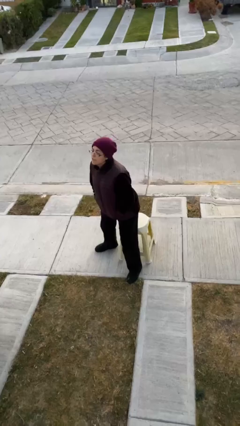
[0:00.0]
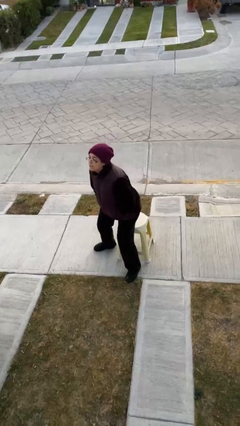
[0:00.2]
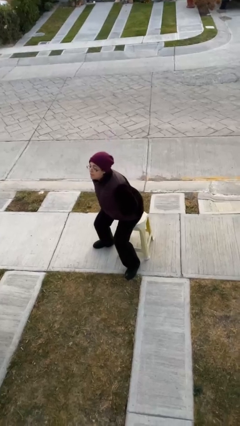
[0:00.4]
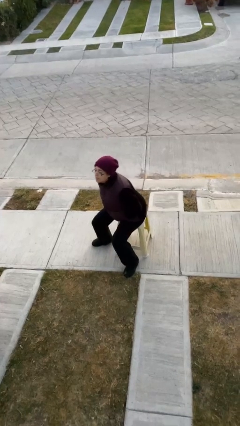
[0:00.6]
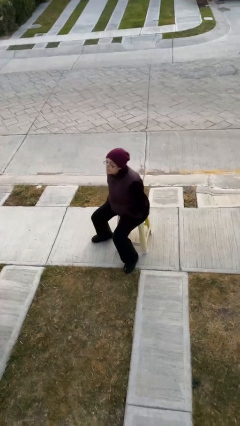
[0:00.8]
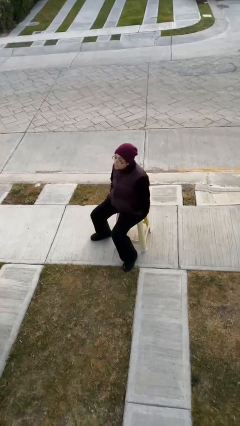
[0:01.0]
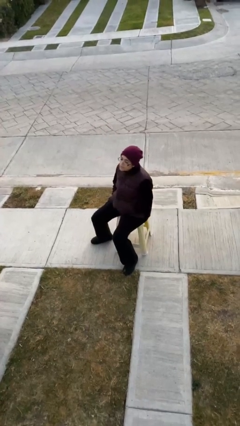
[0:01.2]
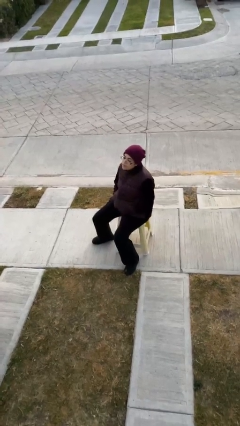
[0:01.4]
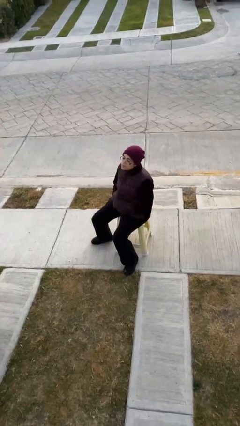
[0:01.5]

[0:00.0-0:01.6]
person sits down

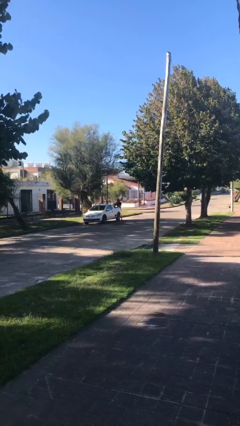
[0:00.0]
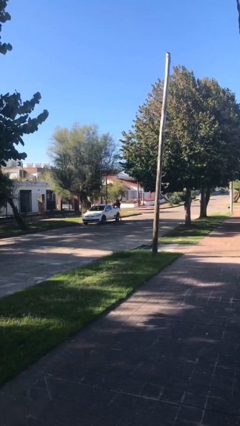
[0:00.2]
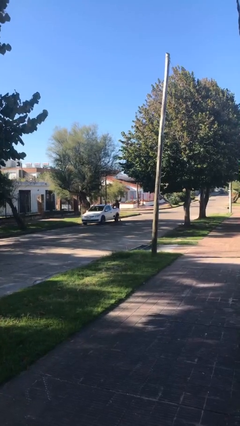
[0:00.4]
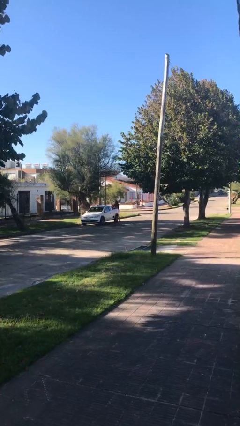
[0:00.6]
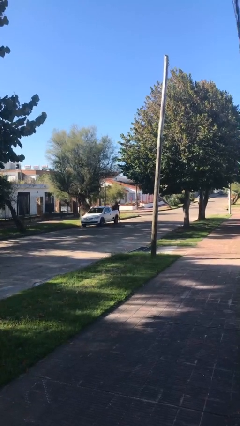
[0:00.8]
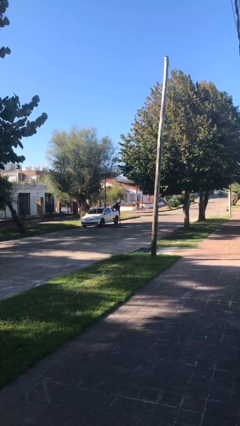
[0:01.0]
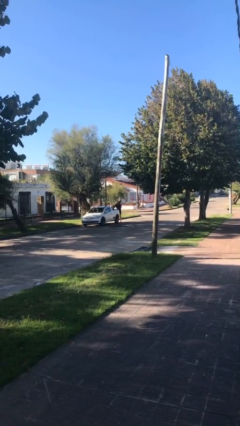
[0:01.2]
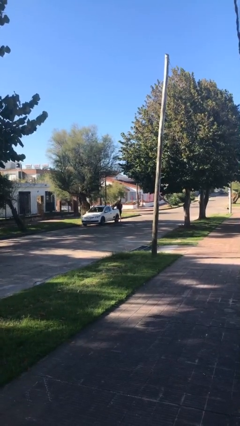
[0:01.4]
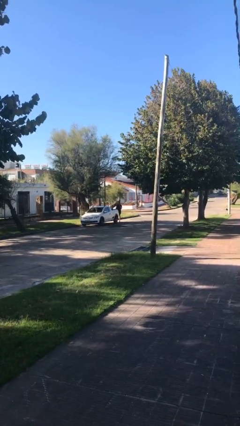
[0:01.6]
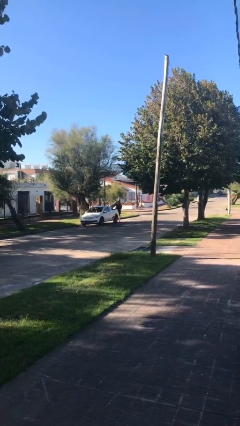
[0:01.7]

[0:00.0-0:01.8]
person unloads car

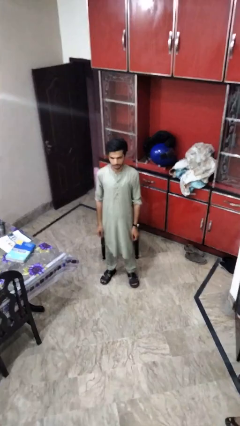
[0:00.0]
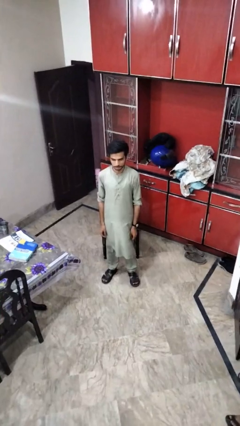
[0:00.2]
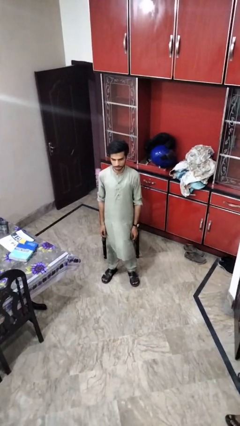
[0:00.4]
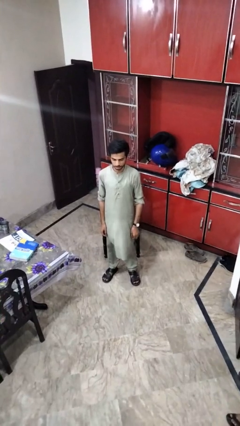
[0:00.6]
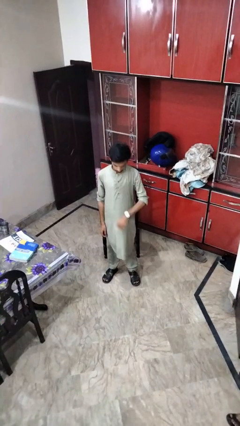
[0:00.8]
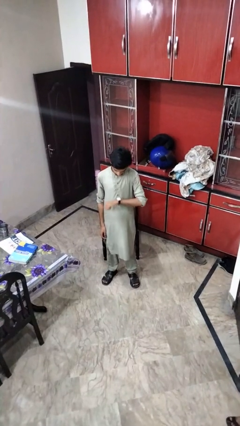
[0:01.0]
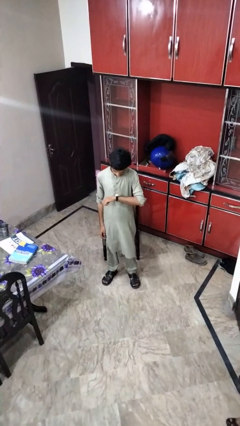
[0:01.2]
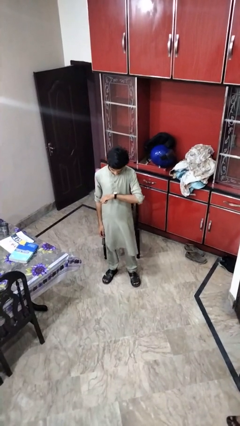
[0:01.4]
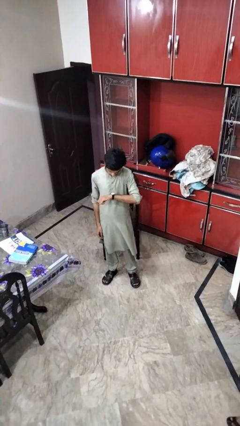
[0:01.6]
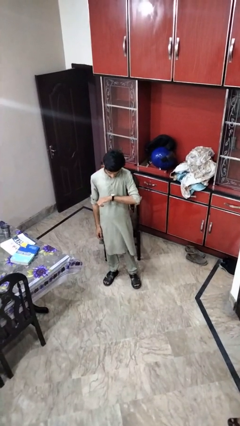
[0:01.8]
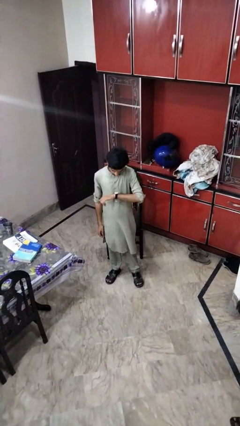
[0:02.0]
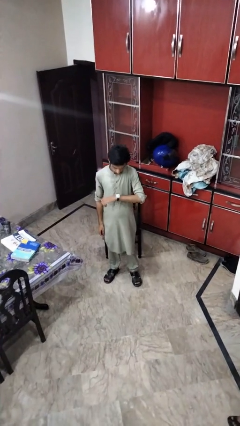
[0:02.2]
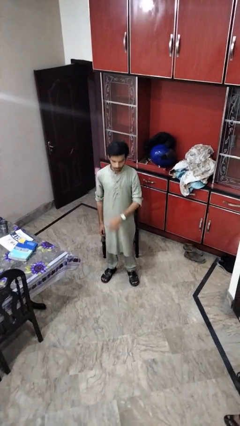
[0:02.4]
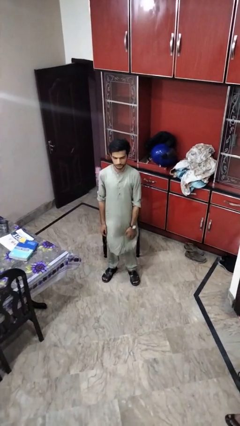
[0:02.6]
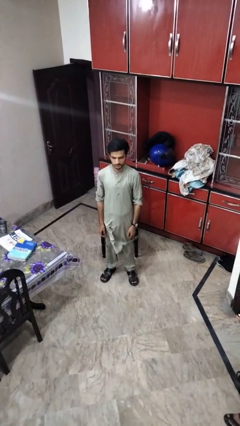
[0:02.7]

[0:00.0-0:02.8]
person looks at wristwatch

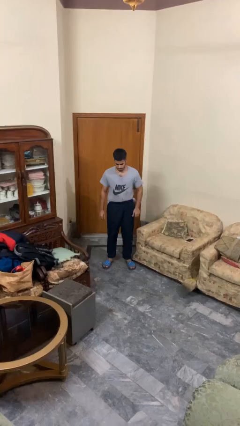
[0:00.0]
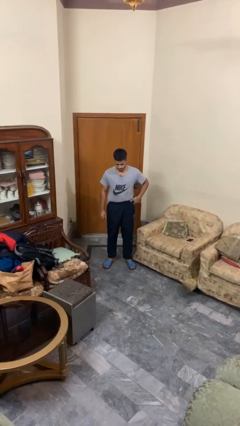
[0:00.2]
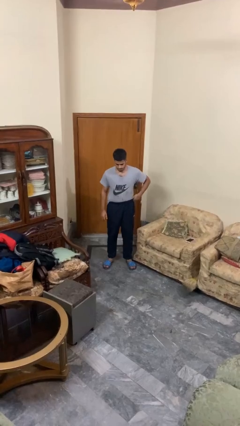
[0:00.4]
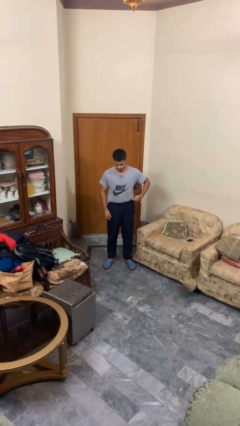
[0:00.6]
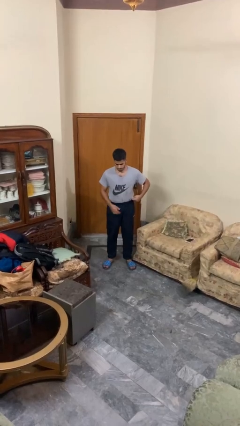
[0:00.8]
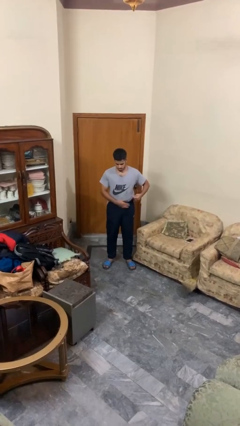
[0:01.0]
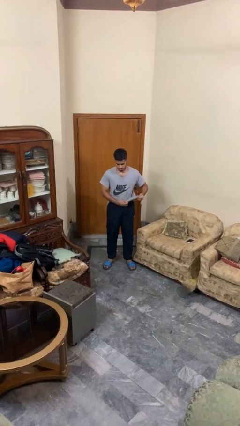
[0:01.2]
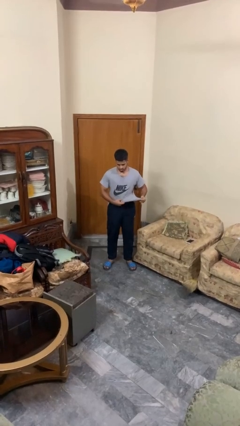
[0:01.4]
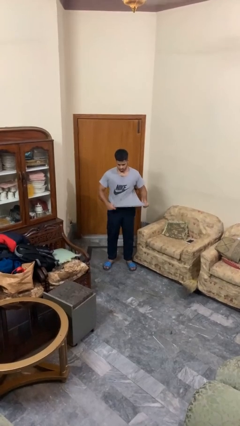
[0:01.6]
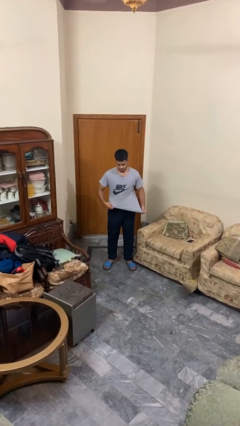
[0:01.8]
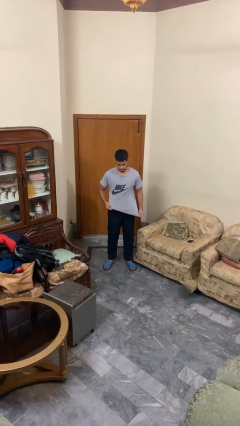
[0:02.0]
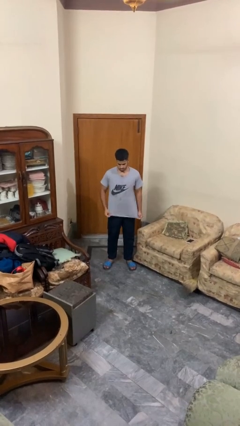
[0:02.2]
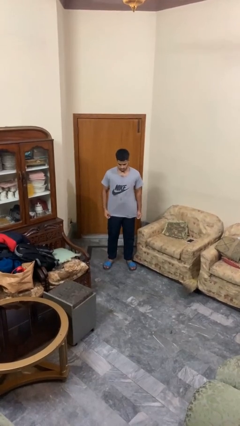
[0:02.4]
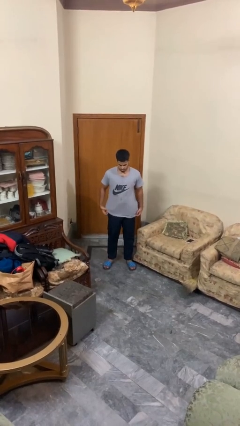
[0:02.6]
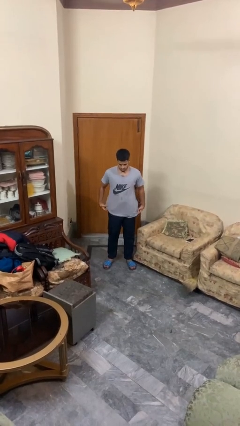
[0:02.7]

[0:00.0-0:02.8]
person untucks shirt

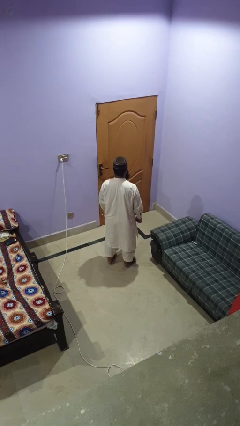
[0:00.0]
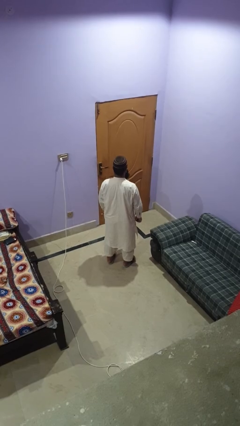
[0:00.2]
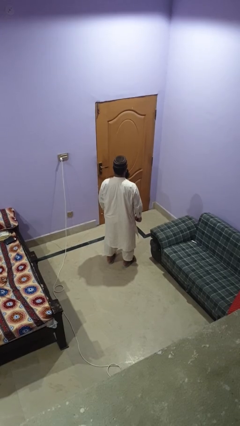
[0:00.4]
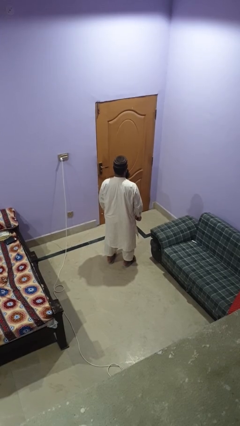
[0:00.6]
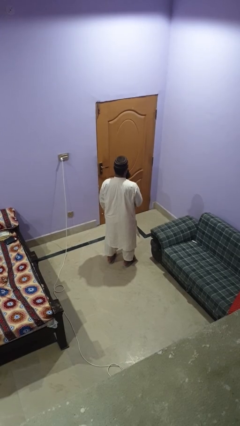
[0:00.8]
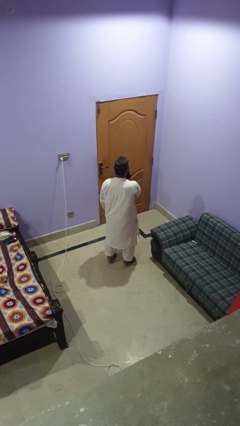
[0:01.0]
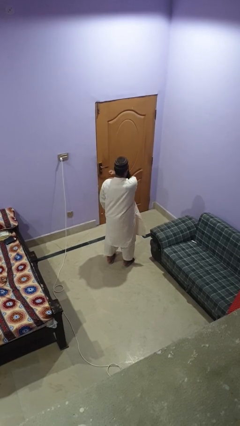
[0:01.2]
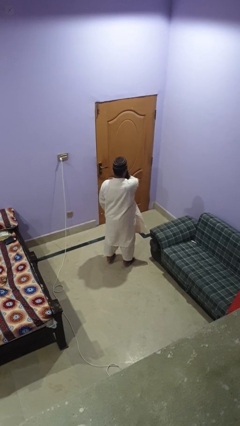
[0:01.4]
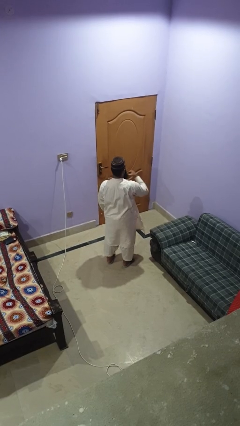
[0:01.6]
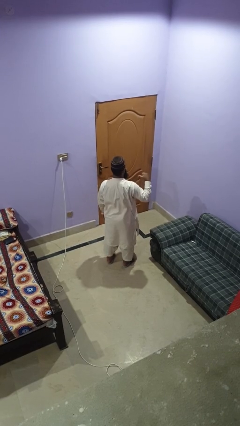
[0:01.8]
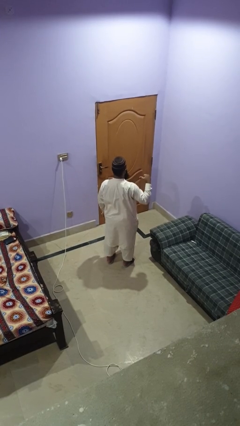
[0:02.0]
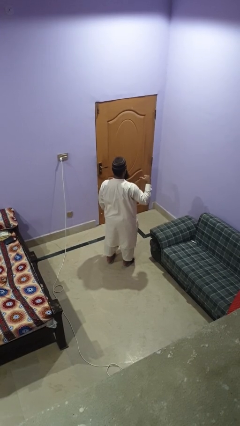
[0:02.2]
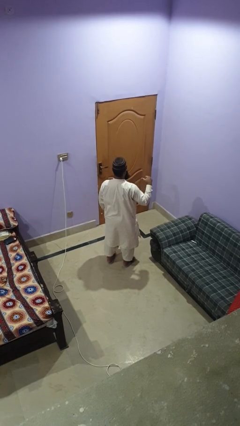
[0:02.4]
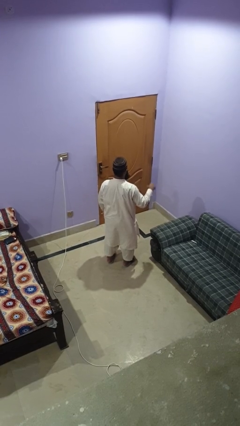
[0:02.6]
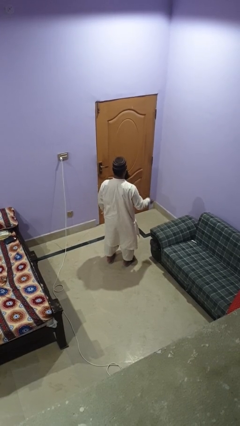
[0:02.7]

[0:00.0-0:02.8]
person gestures cut

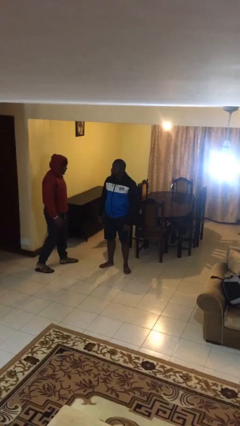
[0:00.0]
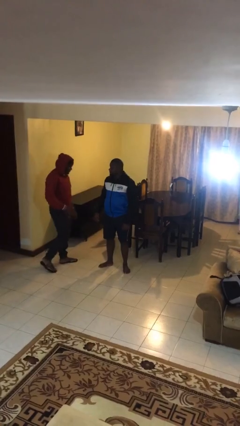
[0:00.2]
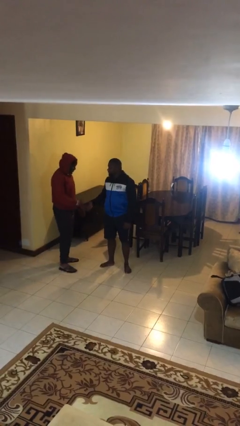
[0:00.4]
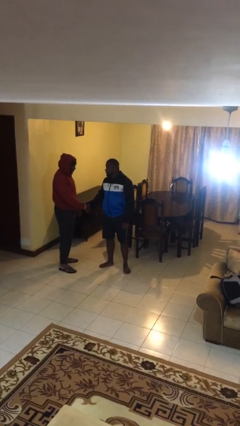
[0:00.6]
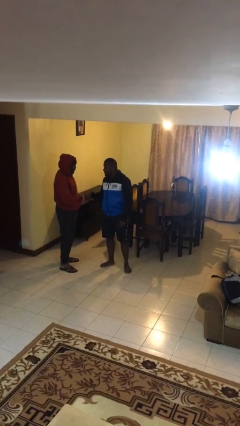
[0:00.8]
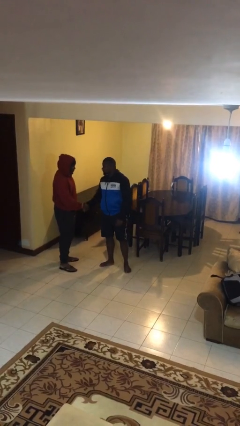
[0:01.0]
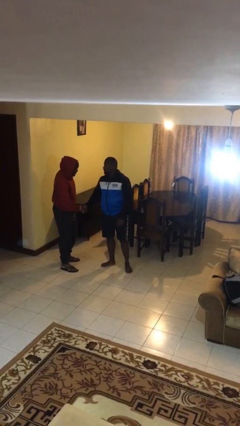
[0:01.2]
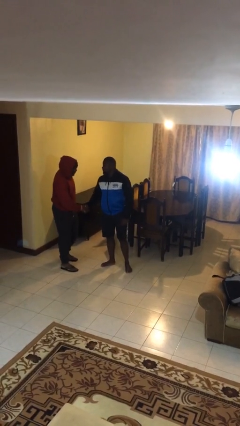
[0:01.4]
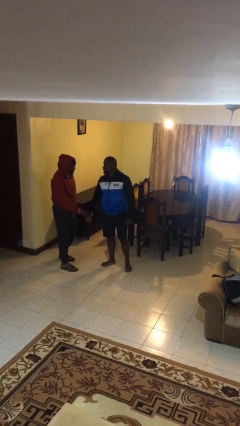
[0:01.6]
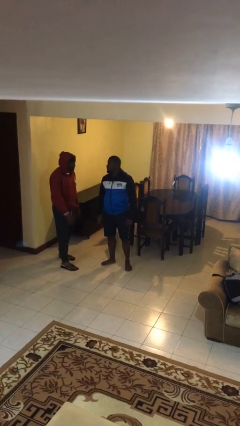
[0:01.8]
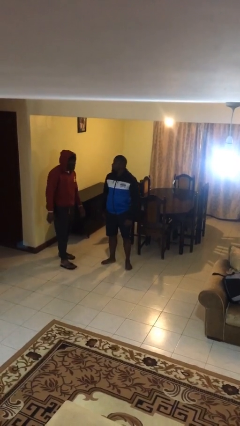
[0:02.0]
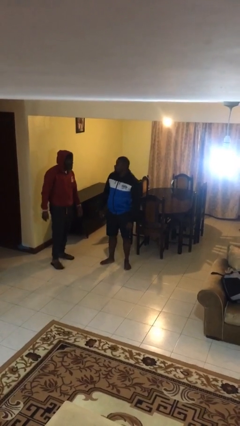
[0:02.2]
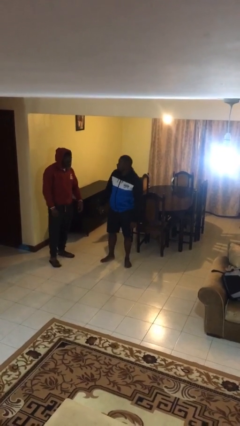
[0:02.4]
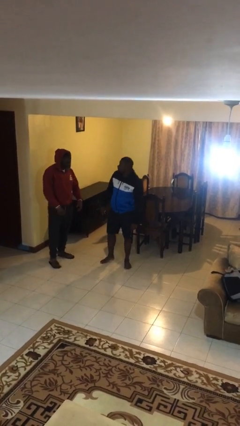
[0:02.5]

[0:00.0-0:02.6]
person shakes hand

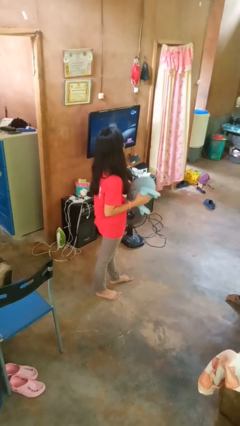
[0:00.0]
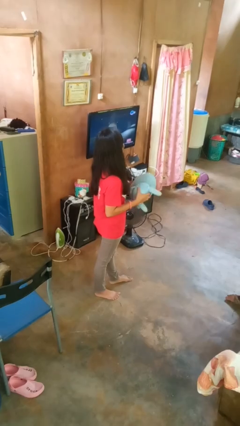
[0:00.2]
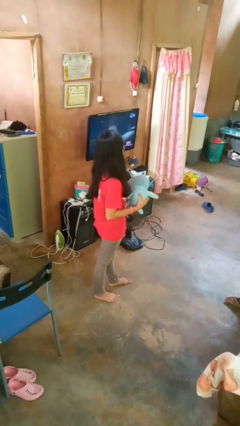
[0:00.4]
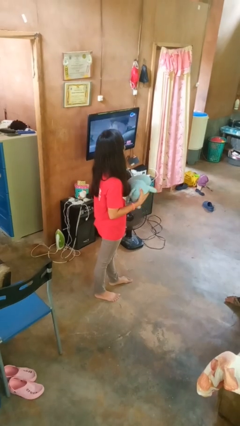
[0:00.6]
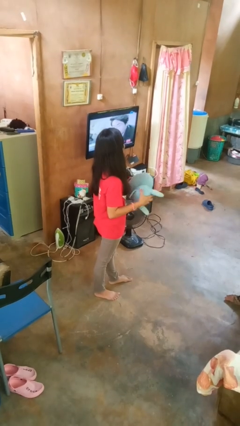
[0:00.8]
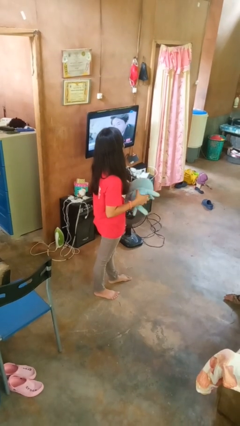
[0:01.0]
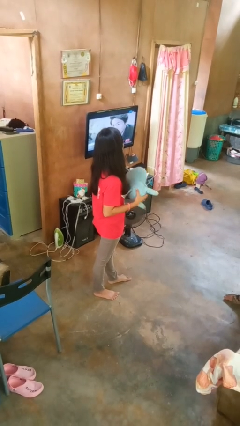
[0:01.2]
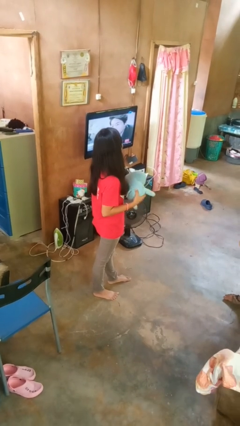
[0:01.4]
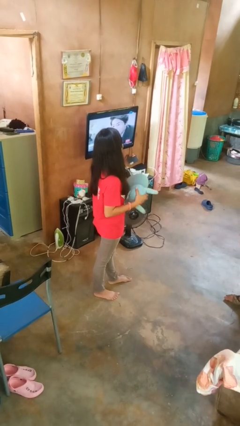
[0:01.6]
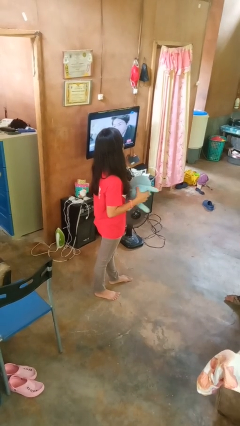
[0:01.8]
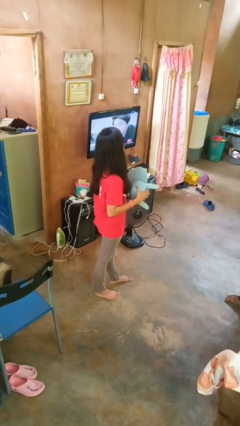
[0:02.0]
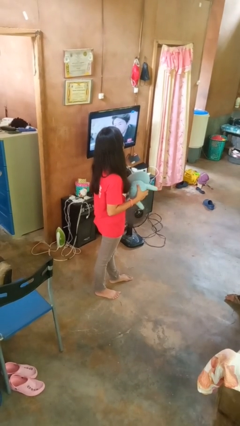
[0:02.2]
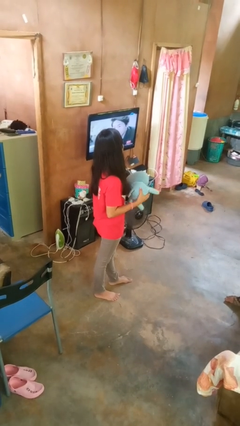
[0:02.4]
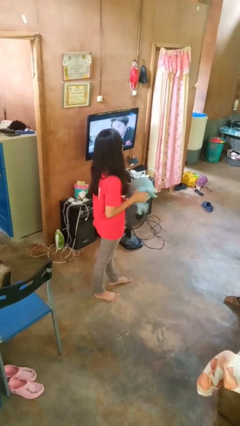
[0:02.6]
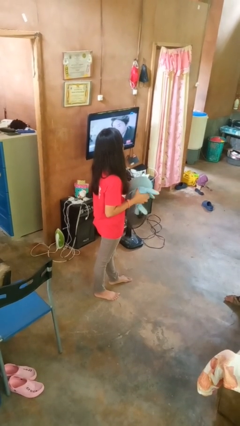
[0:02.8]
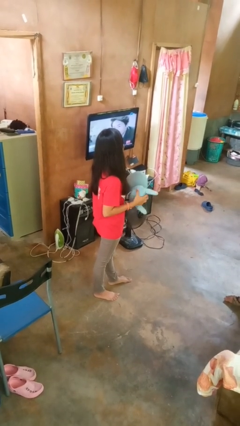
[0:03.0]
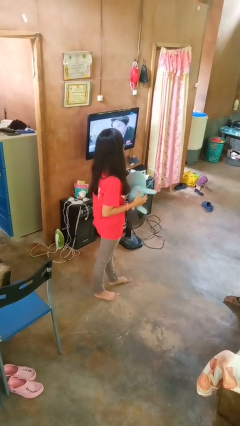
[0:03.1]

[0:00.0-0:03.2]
person squeezes object
